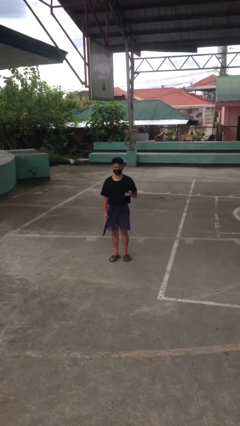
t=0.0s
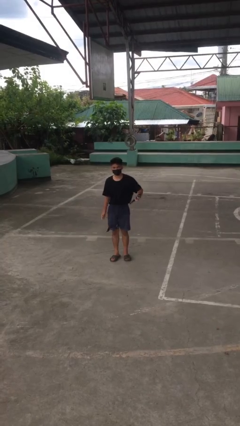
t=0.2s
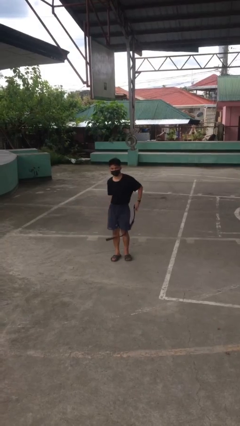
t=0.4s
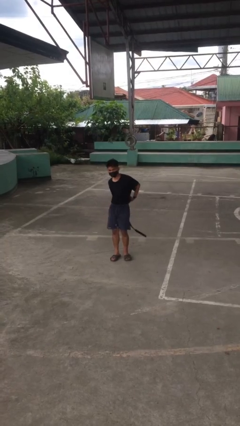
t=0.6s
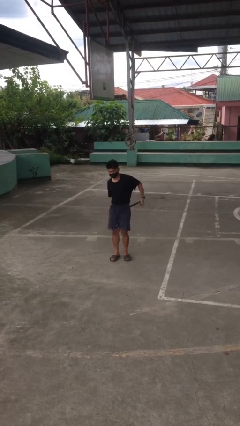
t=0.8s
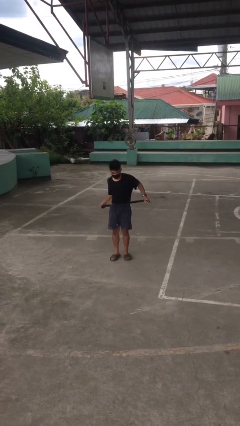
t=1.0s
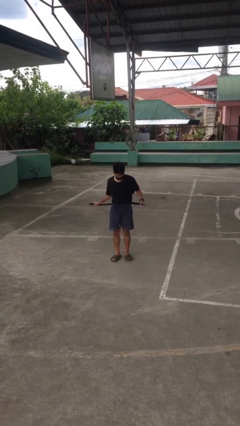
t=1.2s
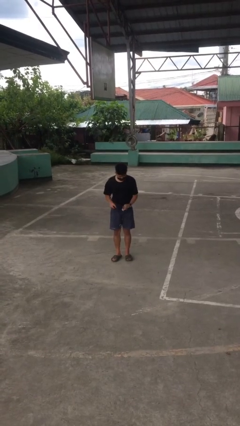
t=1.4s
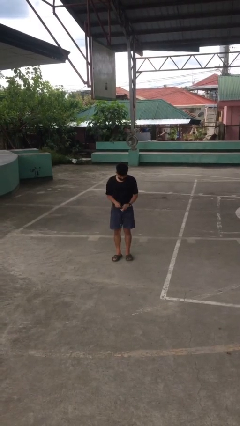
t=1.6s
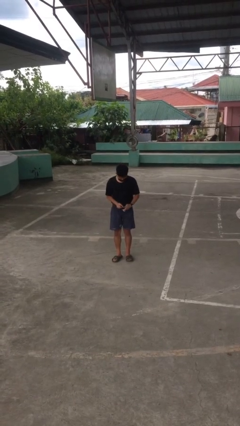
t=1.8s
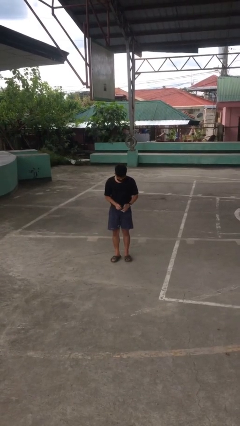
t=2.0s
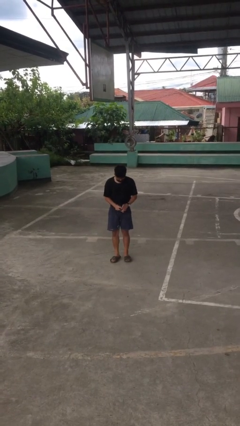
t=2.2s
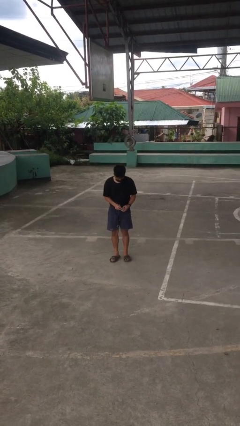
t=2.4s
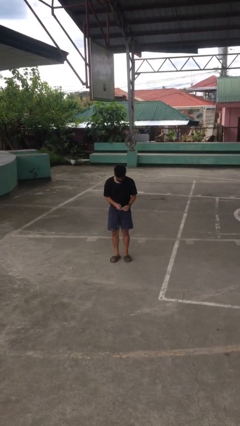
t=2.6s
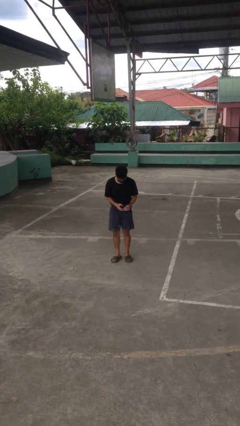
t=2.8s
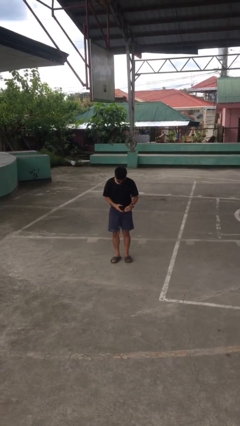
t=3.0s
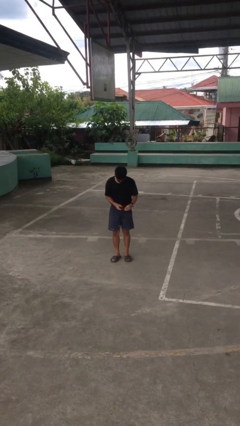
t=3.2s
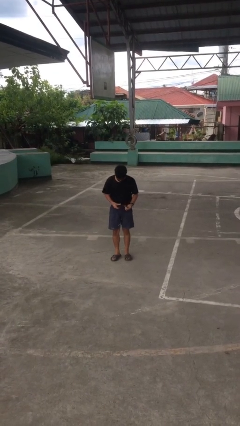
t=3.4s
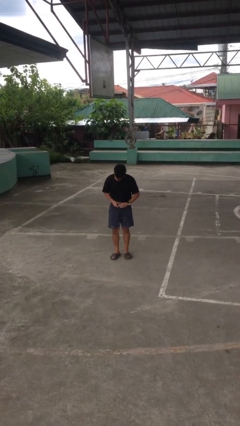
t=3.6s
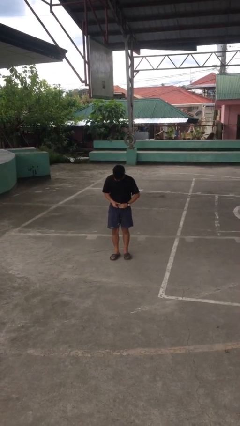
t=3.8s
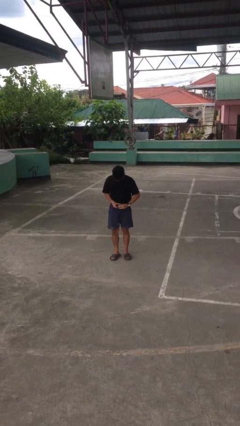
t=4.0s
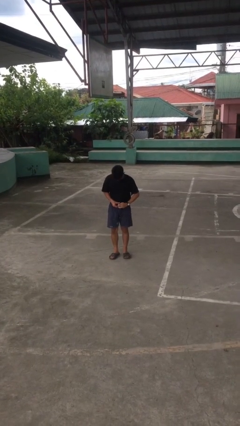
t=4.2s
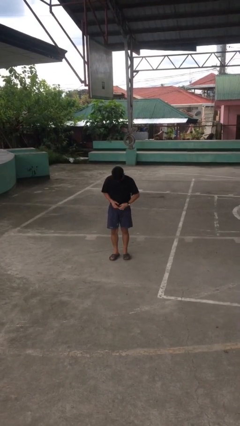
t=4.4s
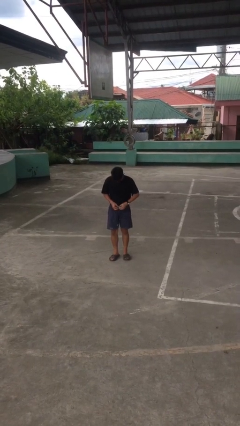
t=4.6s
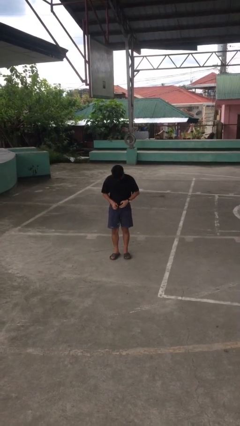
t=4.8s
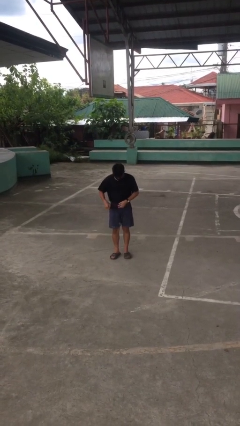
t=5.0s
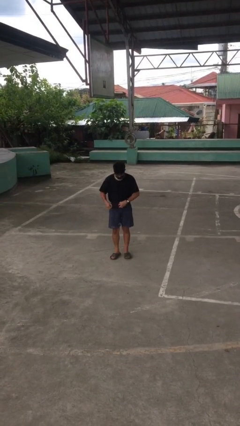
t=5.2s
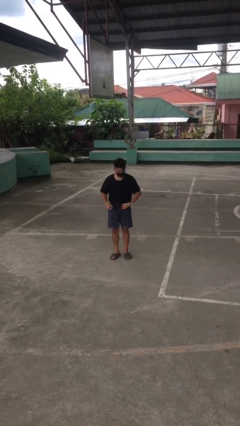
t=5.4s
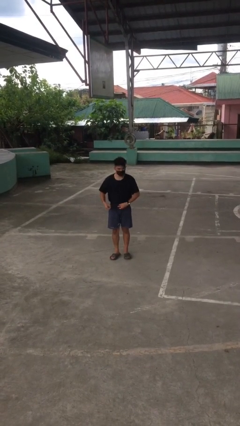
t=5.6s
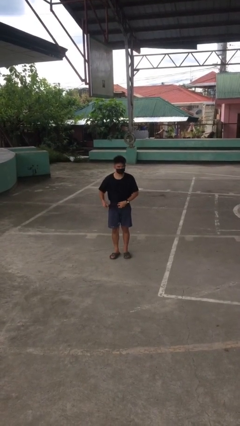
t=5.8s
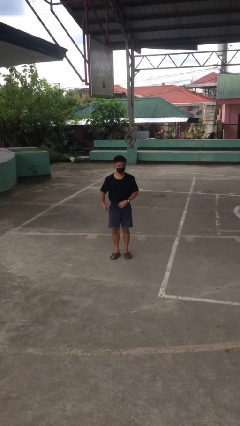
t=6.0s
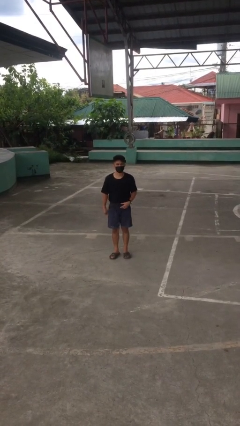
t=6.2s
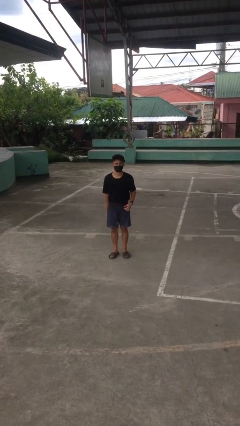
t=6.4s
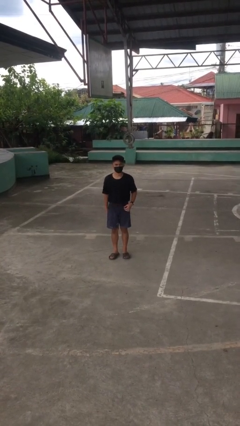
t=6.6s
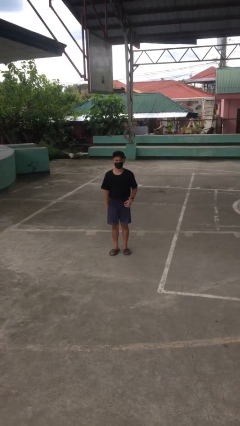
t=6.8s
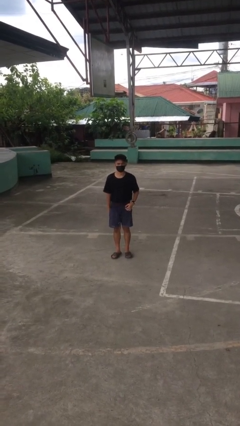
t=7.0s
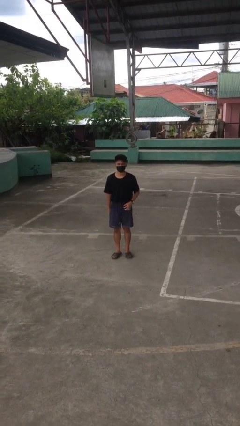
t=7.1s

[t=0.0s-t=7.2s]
person puts on belt

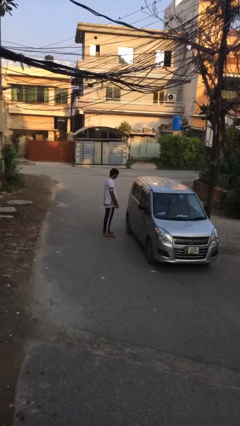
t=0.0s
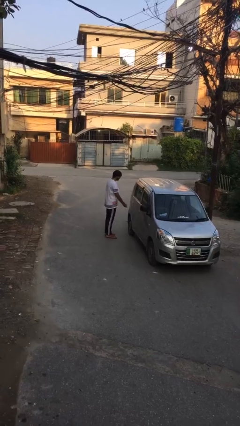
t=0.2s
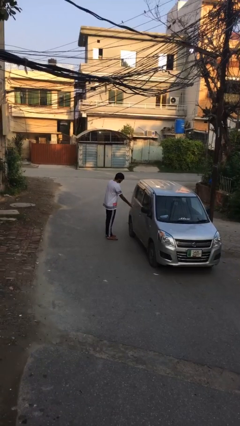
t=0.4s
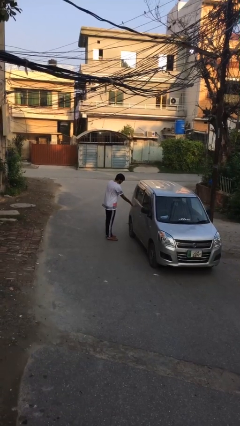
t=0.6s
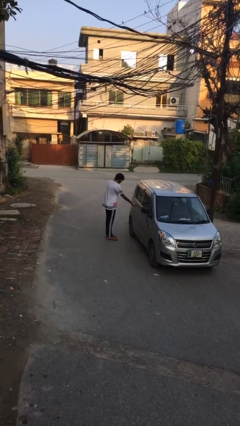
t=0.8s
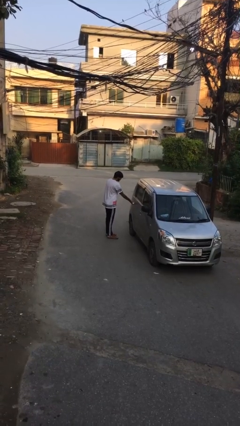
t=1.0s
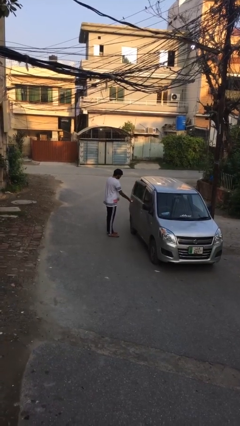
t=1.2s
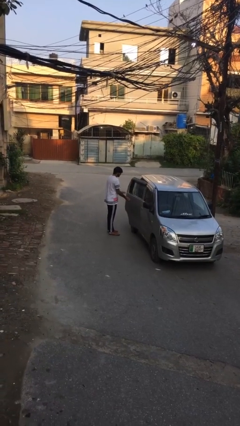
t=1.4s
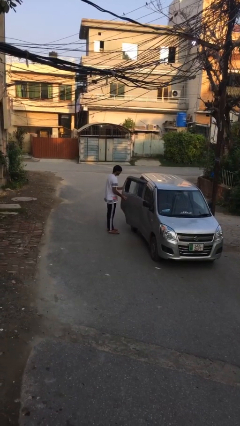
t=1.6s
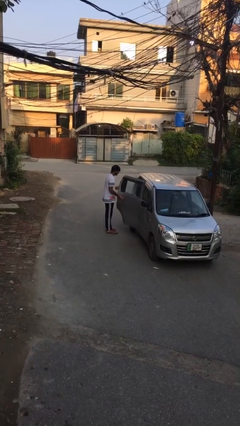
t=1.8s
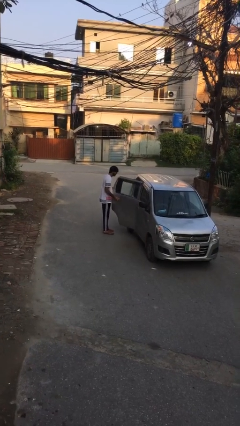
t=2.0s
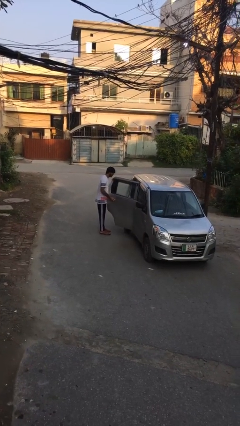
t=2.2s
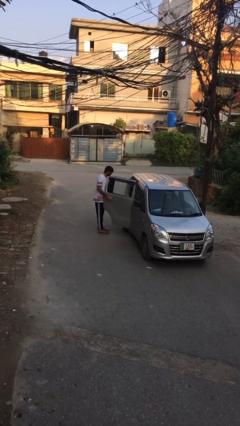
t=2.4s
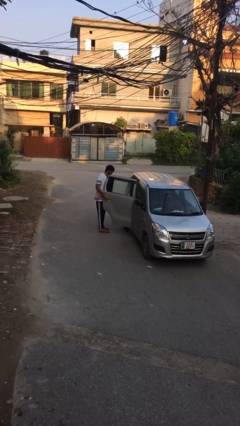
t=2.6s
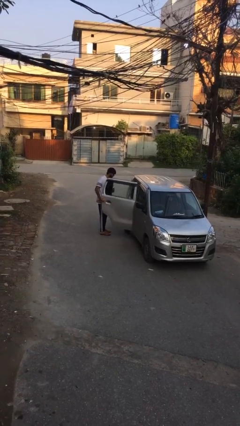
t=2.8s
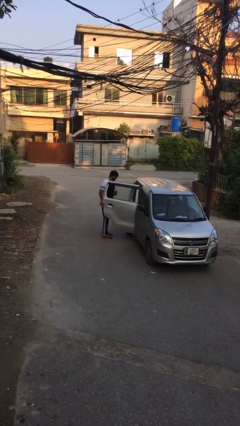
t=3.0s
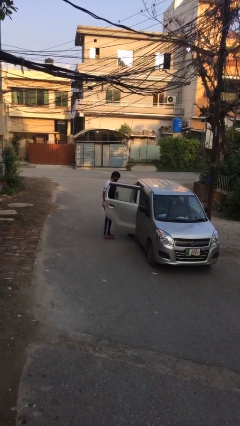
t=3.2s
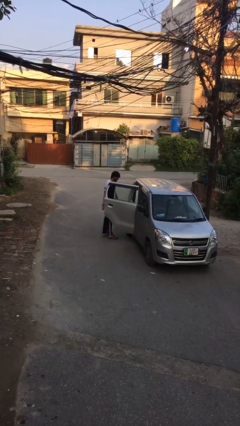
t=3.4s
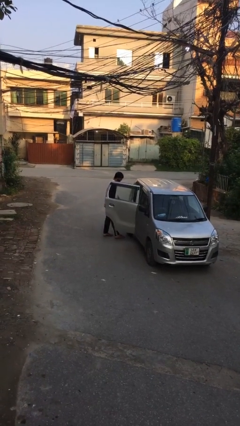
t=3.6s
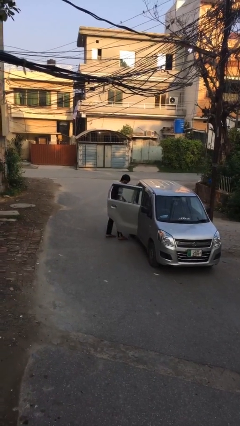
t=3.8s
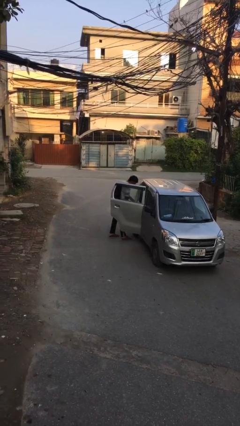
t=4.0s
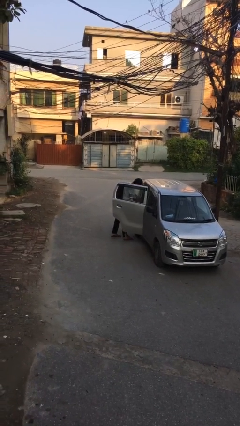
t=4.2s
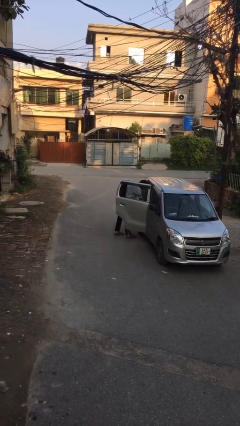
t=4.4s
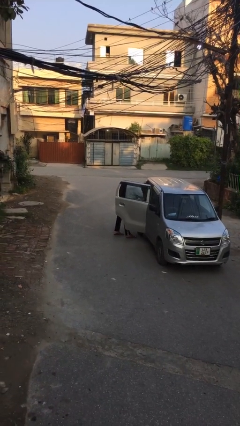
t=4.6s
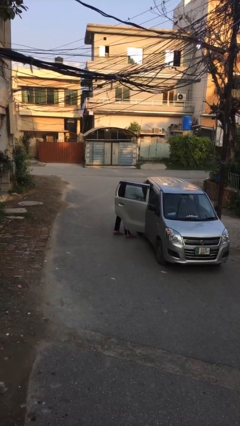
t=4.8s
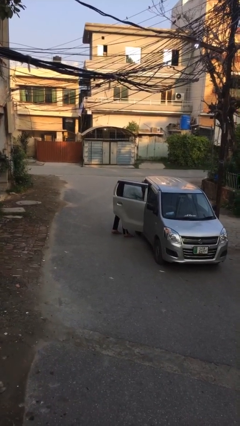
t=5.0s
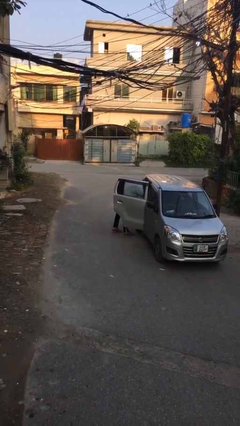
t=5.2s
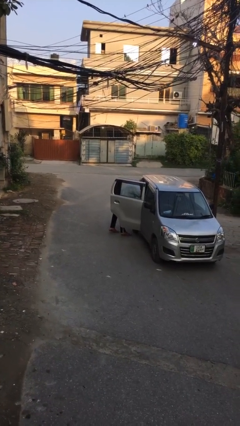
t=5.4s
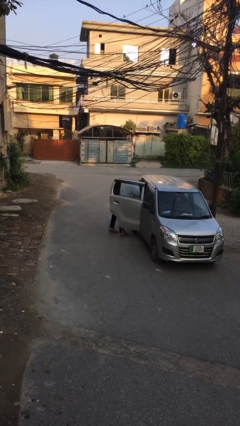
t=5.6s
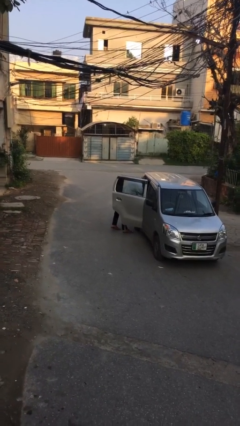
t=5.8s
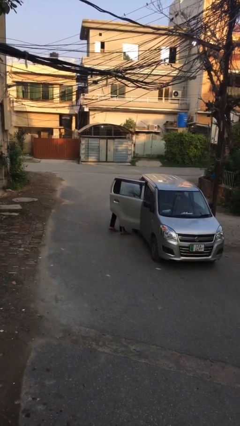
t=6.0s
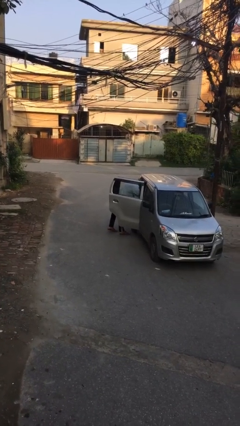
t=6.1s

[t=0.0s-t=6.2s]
person opens car door

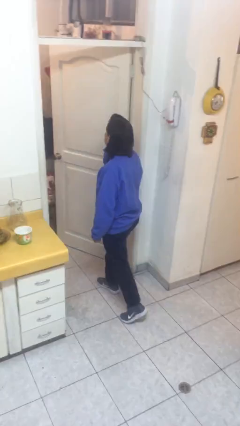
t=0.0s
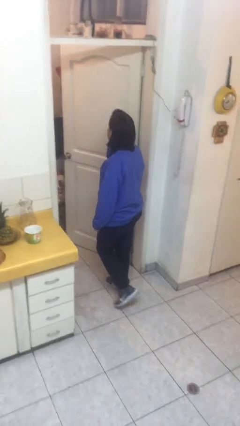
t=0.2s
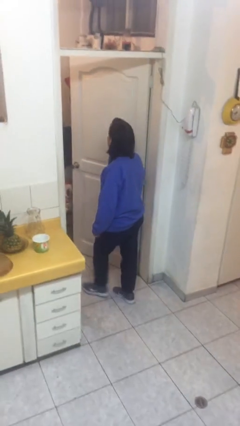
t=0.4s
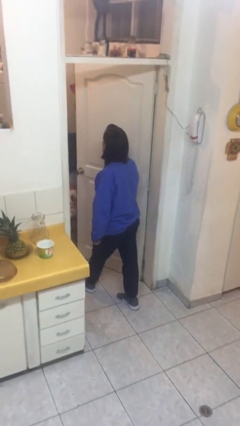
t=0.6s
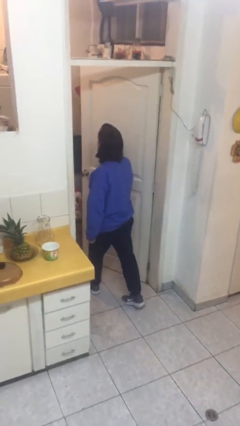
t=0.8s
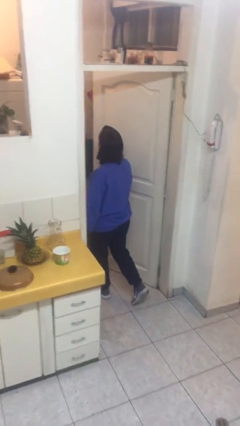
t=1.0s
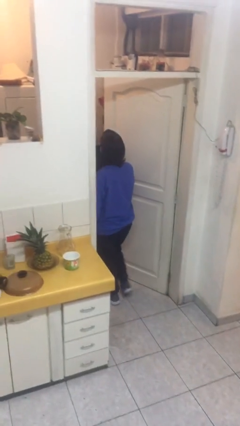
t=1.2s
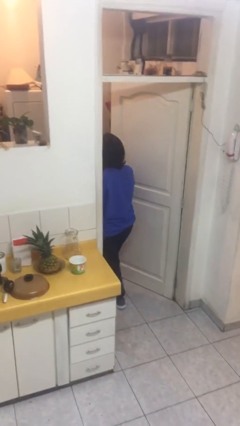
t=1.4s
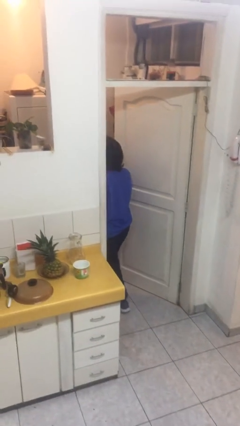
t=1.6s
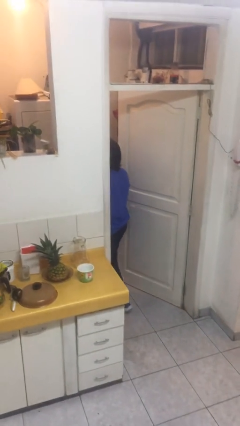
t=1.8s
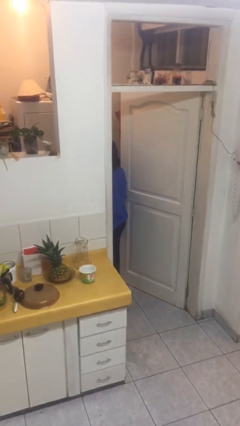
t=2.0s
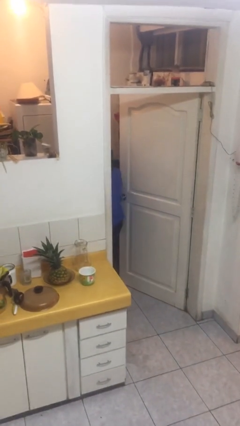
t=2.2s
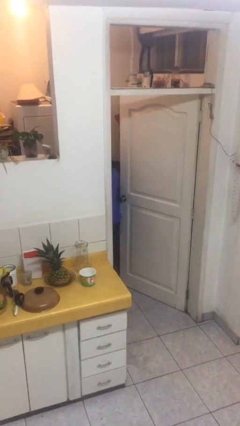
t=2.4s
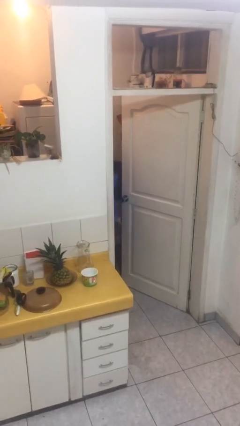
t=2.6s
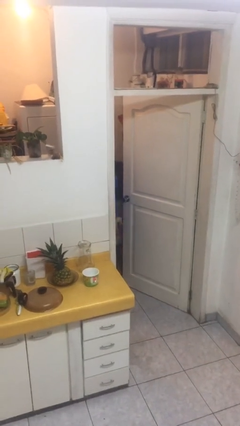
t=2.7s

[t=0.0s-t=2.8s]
person exits scene through structure

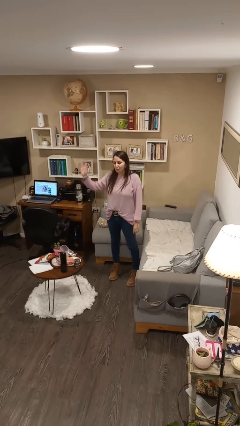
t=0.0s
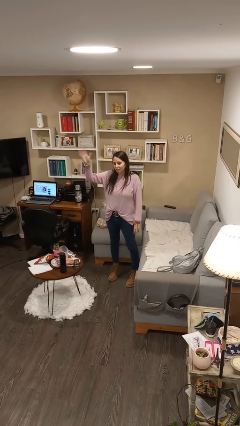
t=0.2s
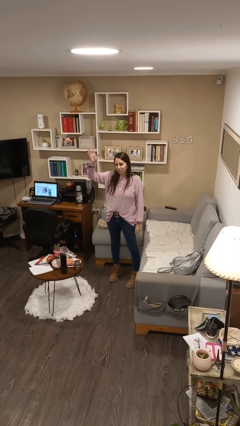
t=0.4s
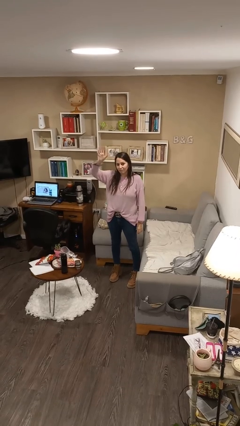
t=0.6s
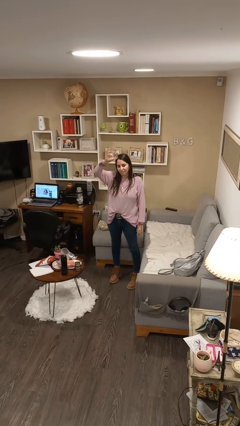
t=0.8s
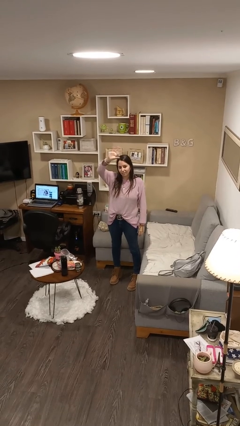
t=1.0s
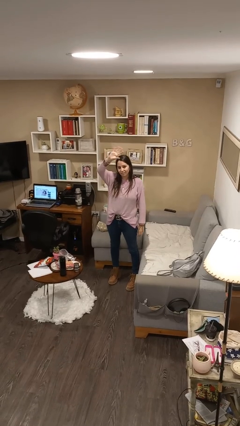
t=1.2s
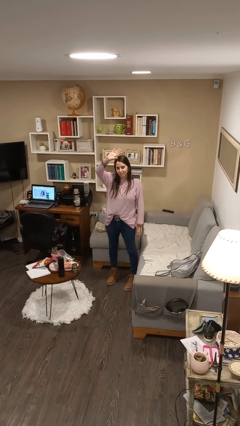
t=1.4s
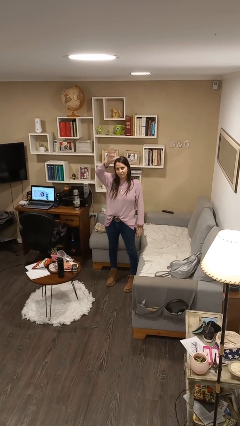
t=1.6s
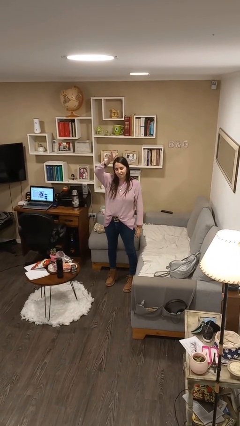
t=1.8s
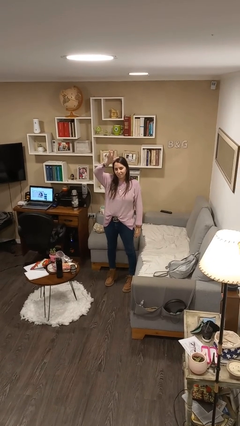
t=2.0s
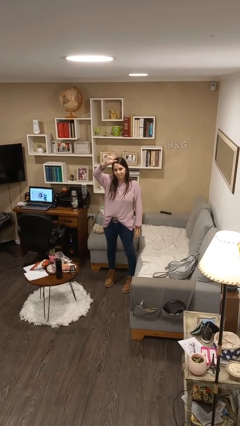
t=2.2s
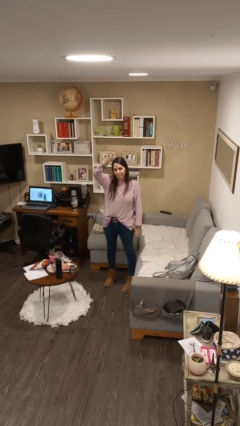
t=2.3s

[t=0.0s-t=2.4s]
person waves at person
